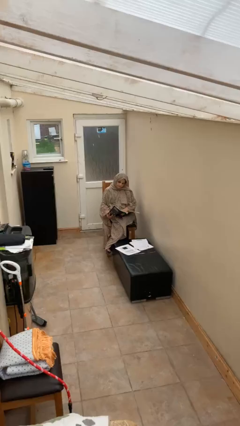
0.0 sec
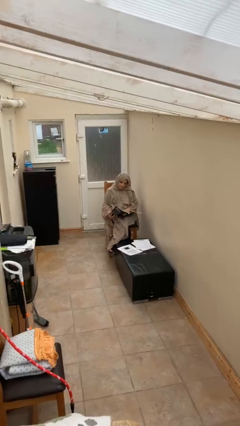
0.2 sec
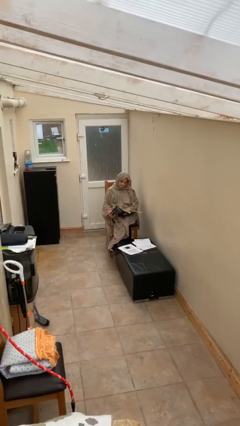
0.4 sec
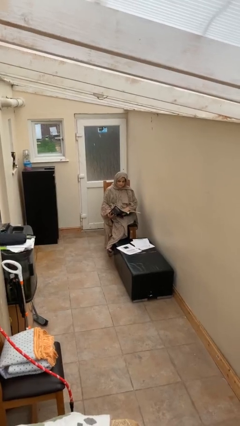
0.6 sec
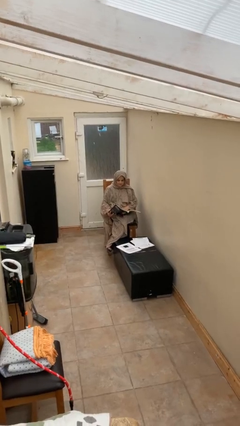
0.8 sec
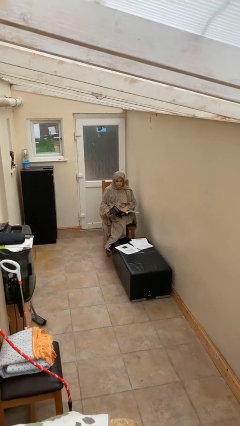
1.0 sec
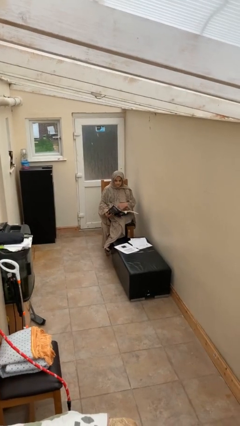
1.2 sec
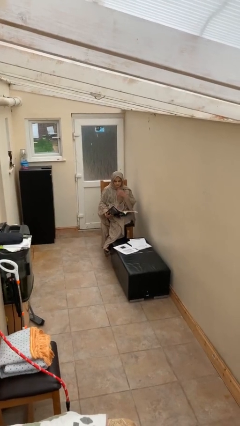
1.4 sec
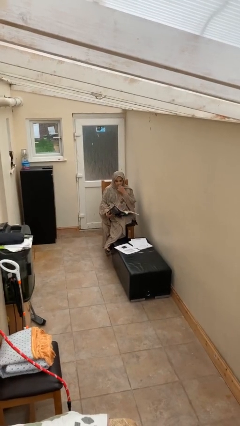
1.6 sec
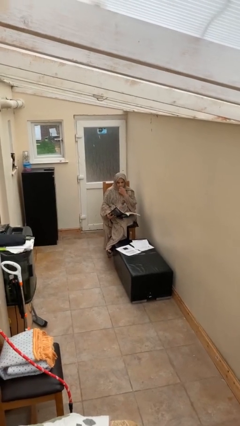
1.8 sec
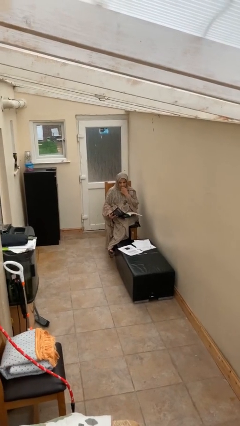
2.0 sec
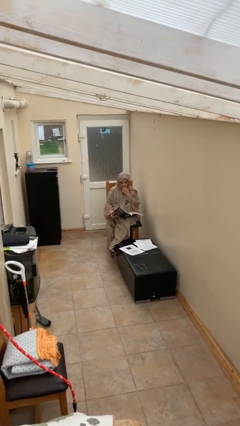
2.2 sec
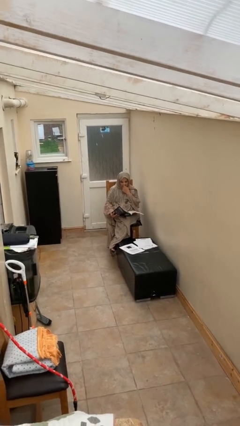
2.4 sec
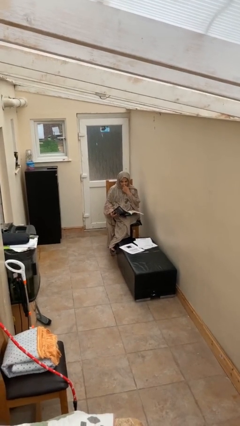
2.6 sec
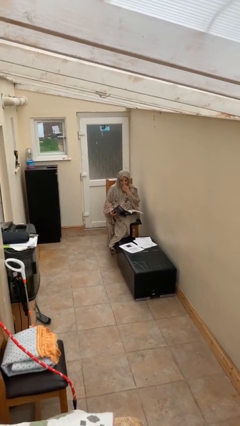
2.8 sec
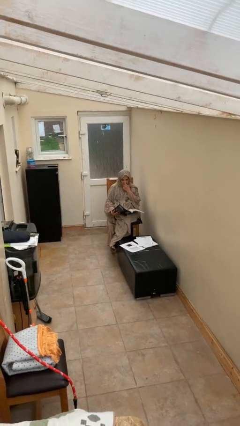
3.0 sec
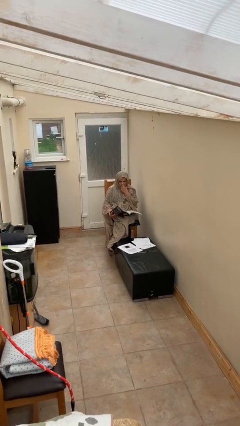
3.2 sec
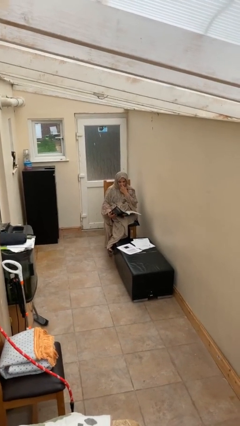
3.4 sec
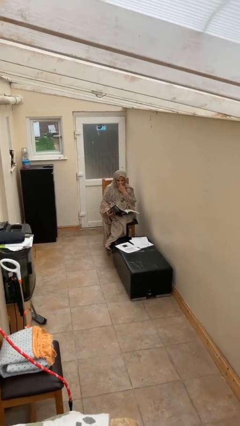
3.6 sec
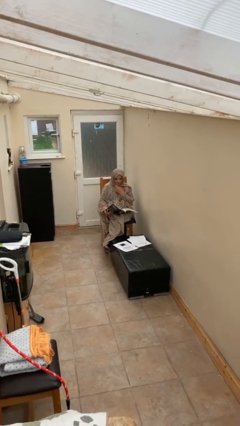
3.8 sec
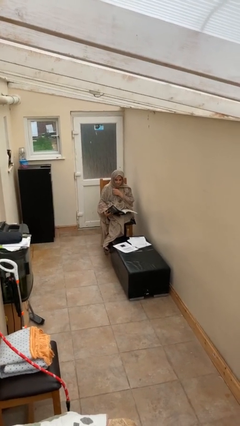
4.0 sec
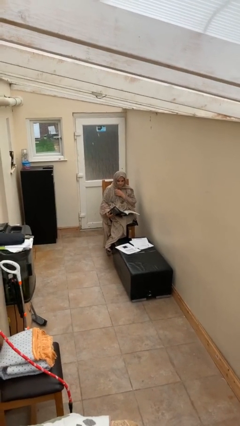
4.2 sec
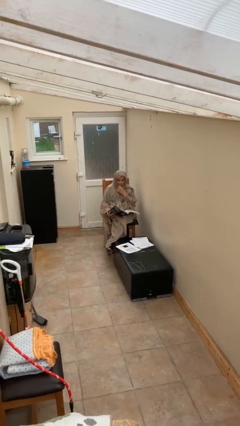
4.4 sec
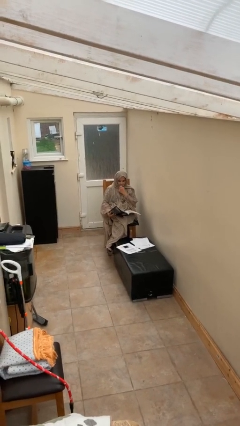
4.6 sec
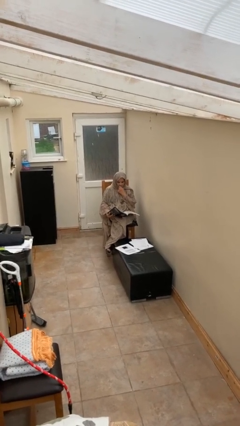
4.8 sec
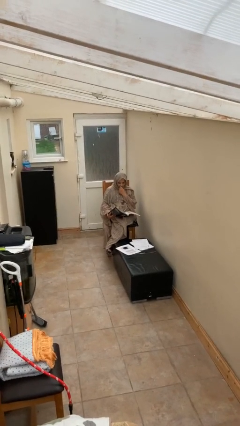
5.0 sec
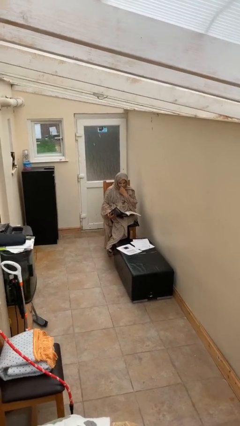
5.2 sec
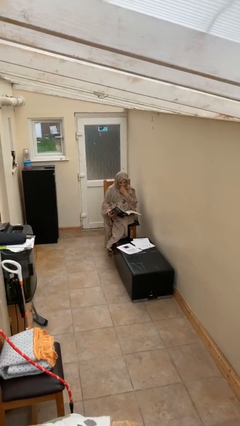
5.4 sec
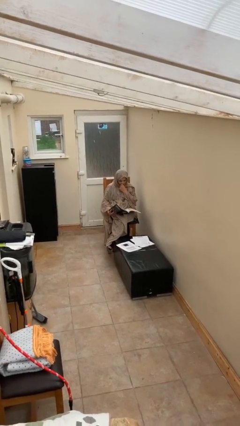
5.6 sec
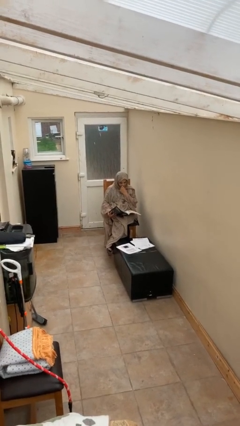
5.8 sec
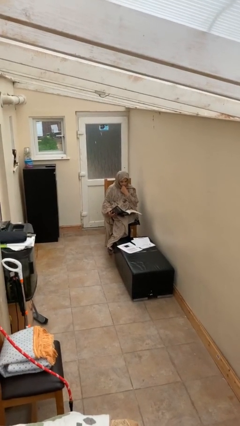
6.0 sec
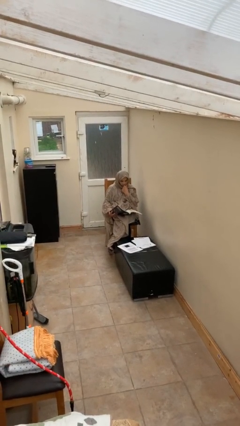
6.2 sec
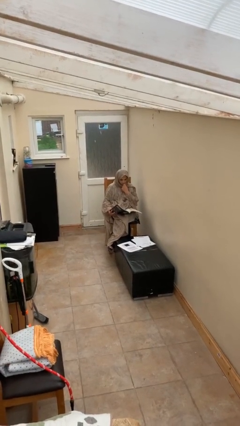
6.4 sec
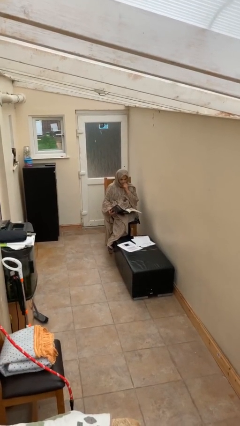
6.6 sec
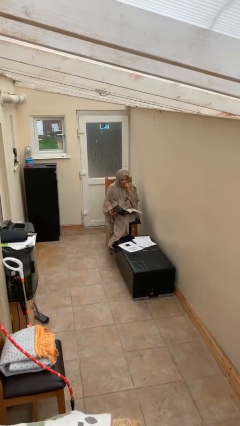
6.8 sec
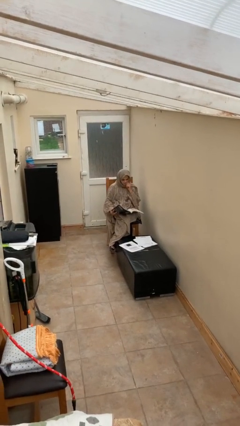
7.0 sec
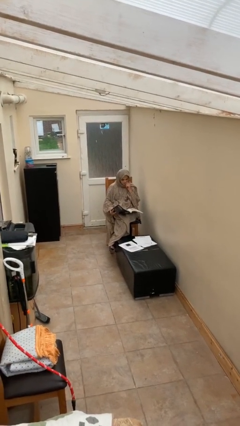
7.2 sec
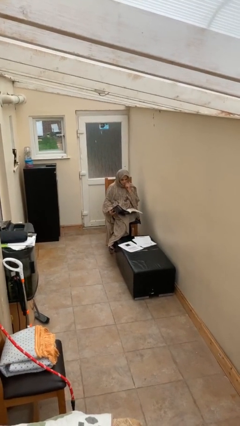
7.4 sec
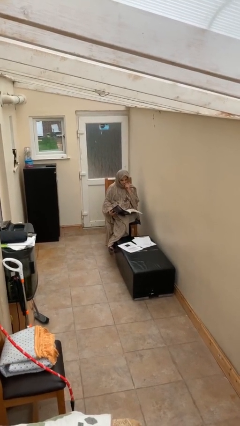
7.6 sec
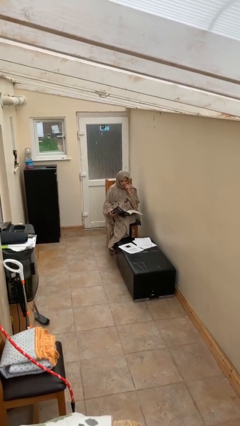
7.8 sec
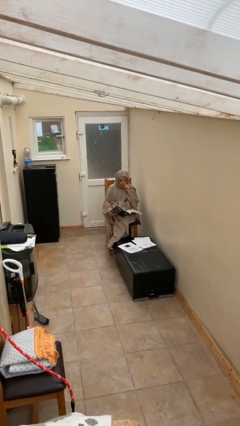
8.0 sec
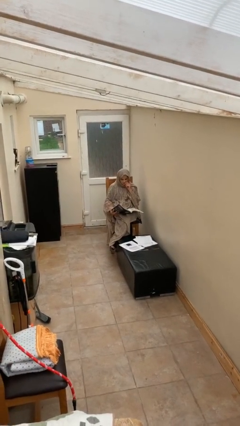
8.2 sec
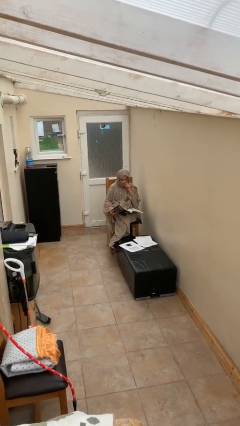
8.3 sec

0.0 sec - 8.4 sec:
person reads document

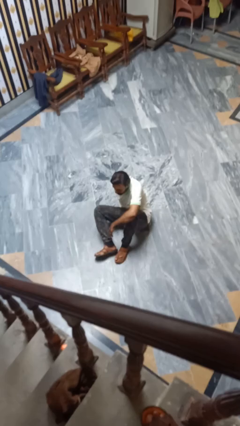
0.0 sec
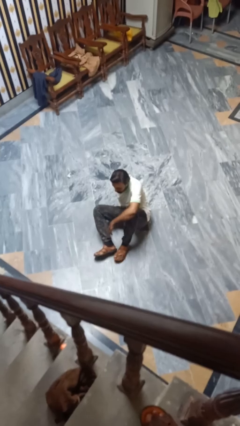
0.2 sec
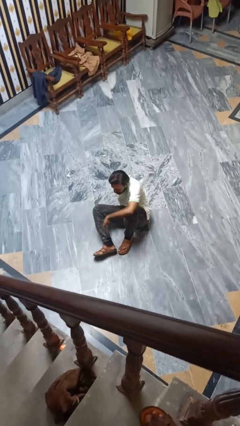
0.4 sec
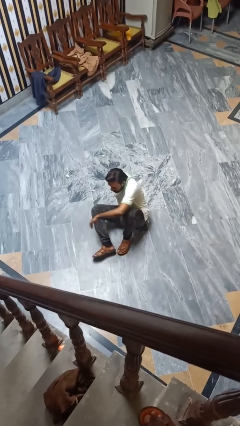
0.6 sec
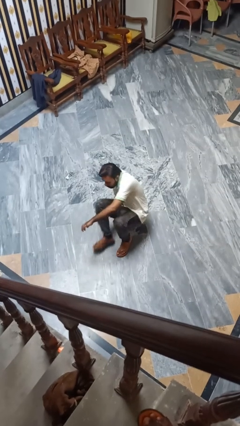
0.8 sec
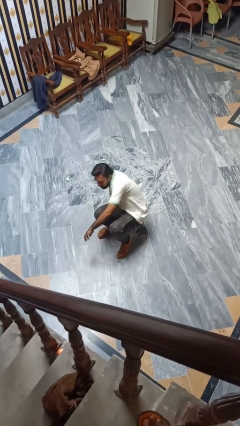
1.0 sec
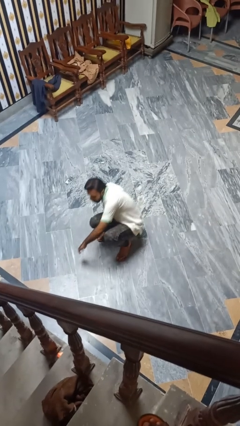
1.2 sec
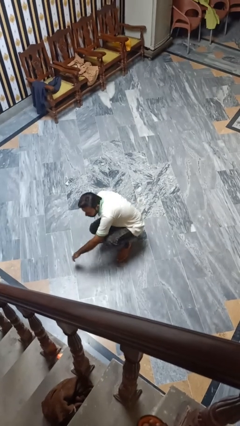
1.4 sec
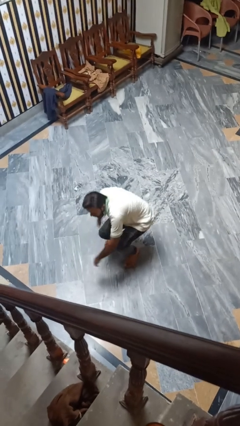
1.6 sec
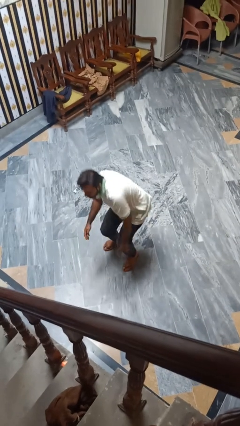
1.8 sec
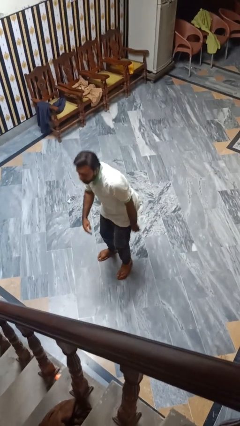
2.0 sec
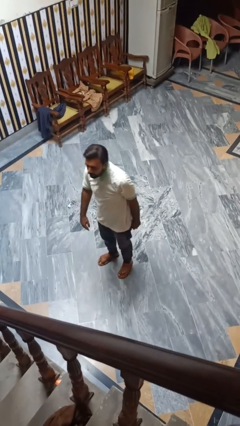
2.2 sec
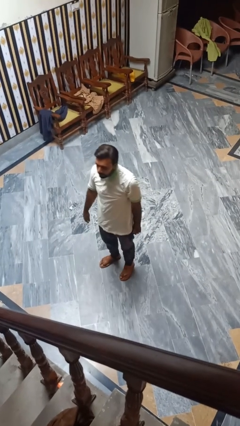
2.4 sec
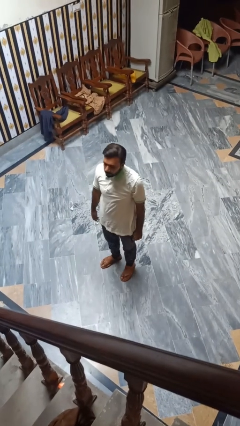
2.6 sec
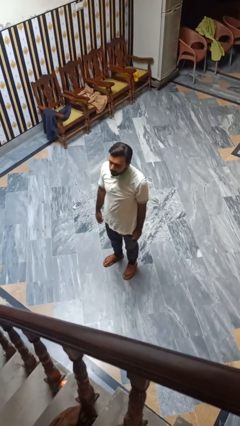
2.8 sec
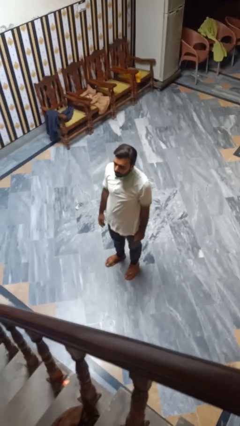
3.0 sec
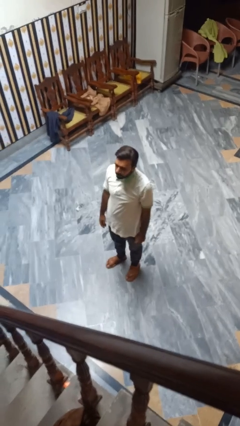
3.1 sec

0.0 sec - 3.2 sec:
person stands up from floor

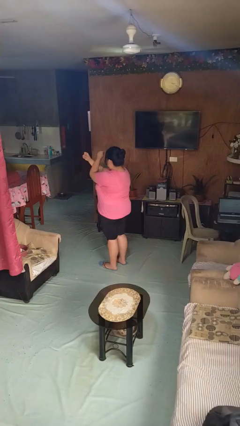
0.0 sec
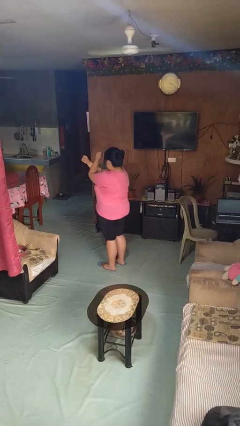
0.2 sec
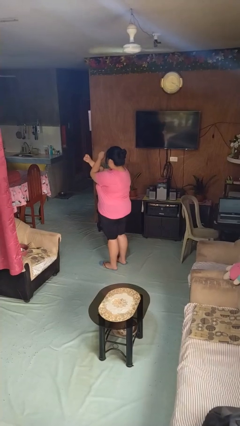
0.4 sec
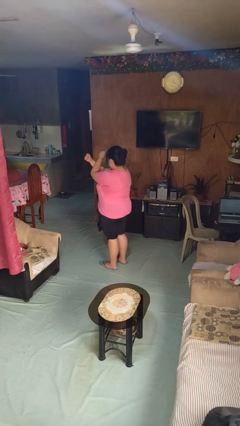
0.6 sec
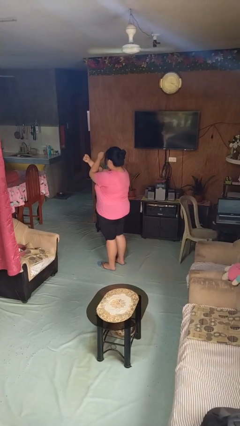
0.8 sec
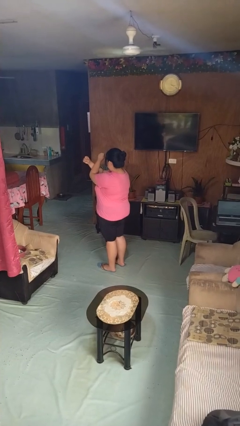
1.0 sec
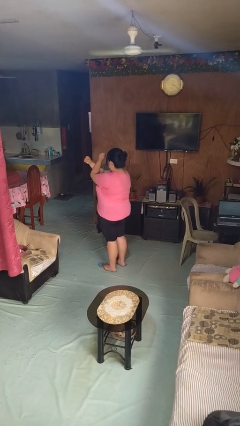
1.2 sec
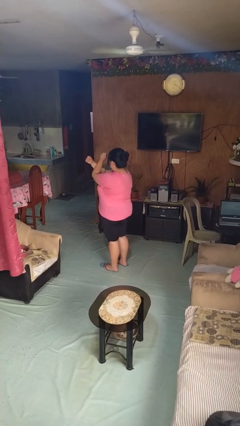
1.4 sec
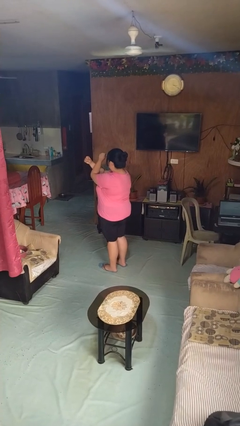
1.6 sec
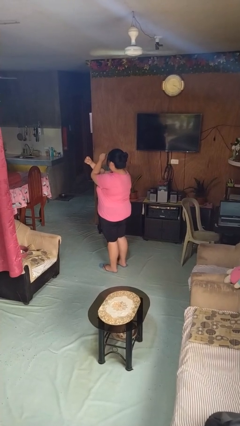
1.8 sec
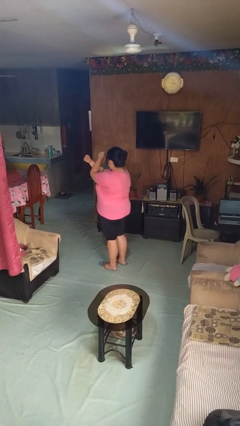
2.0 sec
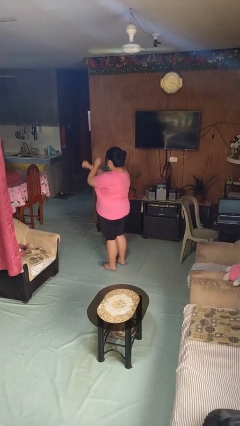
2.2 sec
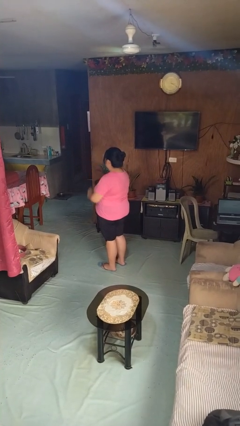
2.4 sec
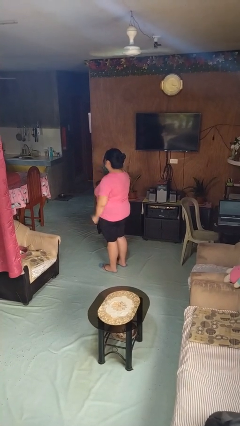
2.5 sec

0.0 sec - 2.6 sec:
person gestures arms x

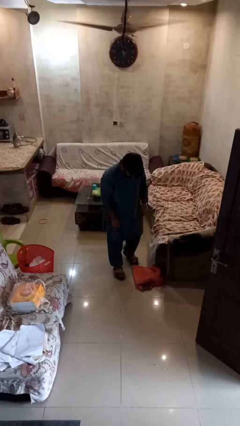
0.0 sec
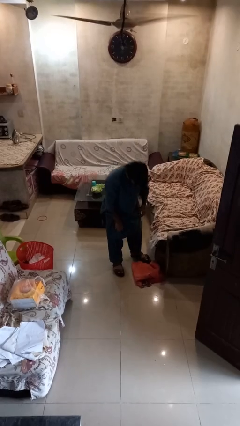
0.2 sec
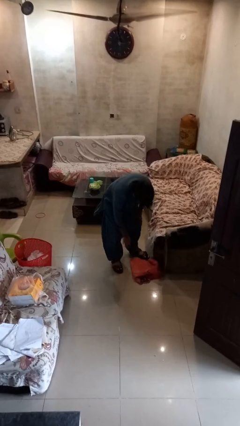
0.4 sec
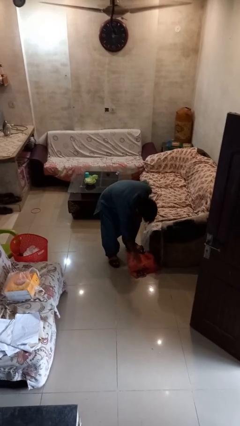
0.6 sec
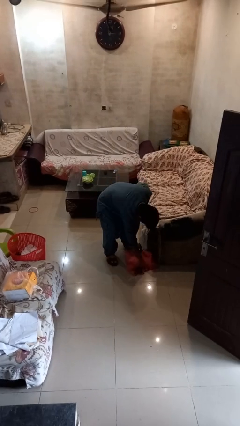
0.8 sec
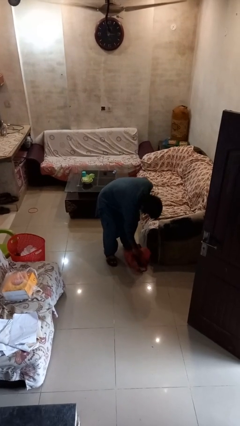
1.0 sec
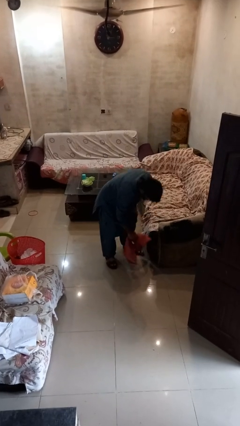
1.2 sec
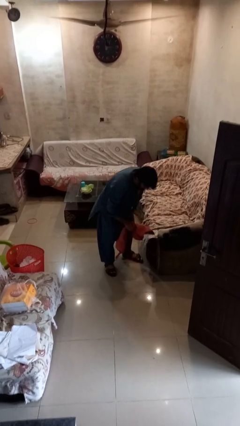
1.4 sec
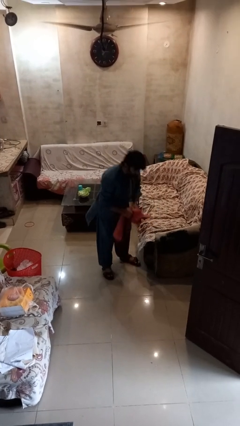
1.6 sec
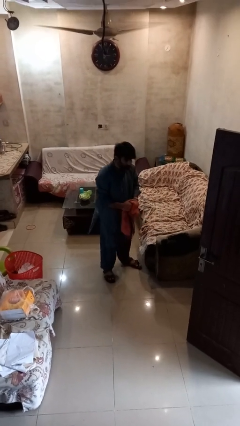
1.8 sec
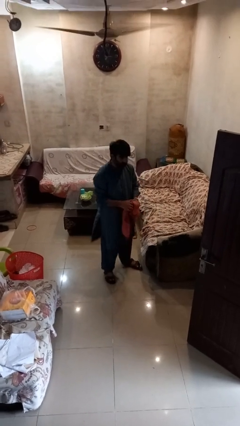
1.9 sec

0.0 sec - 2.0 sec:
person picks up object from floor

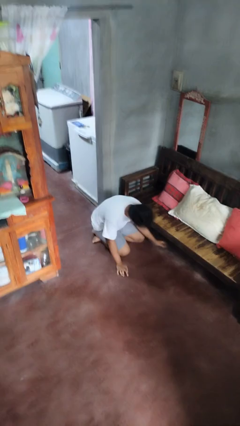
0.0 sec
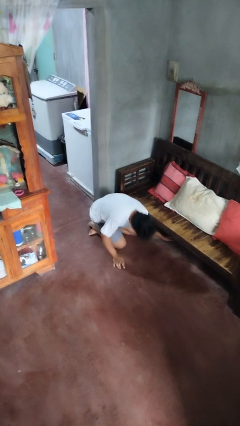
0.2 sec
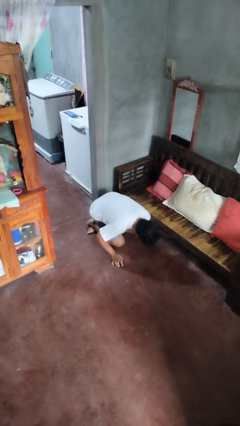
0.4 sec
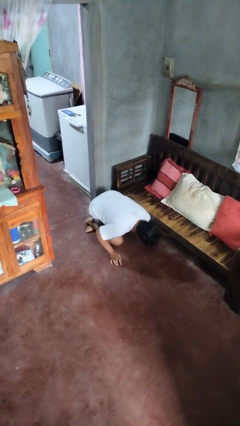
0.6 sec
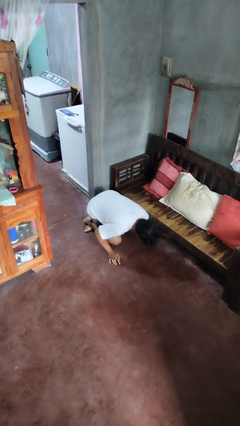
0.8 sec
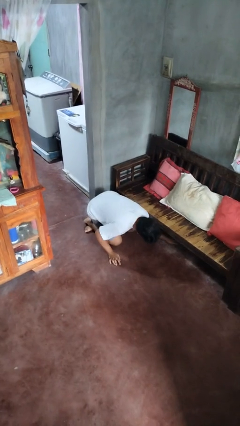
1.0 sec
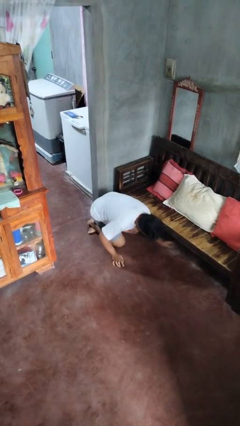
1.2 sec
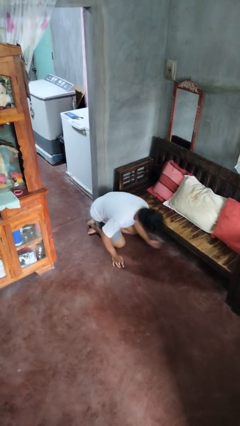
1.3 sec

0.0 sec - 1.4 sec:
person searches under couch

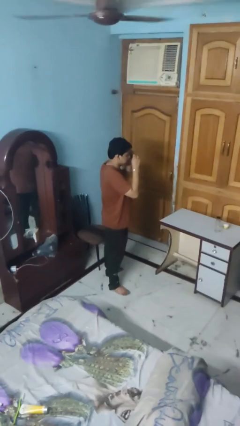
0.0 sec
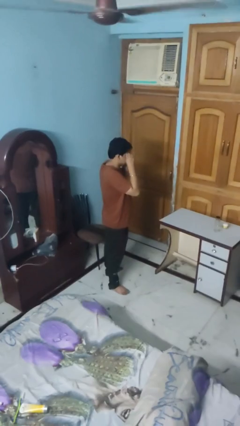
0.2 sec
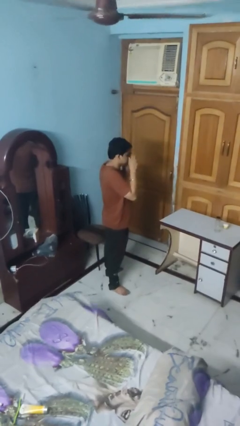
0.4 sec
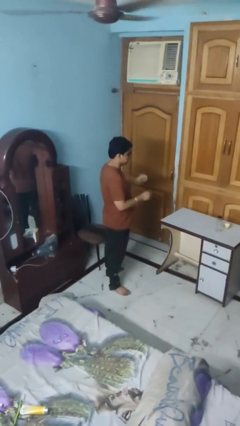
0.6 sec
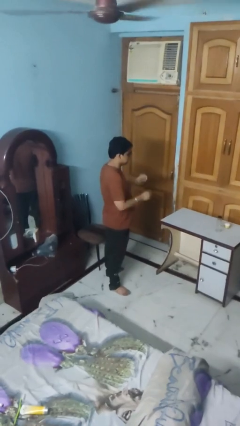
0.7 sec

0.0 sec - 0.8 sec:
person puts on sunglasses
